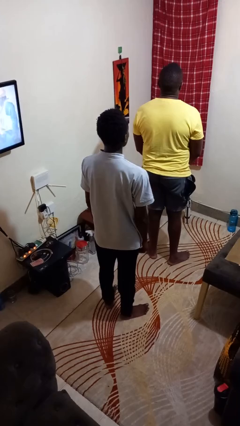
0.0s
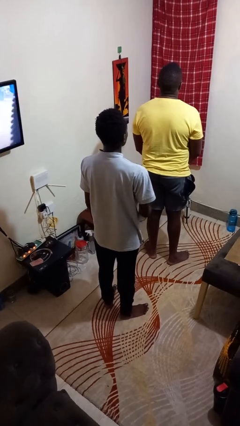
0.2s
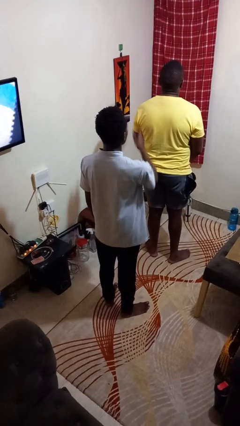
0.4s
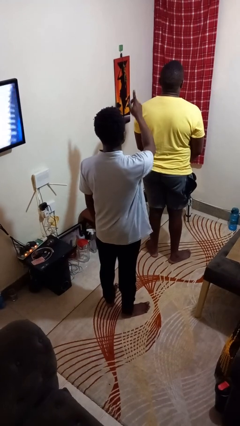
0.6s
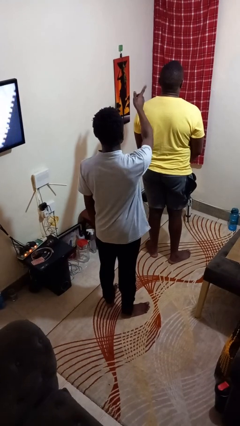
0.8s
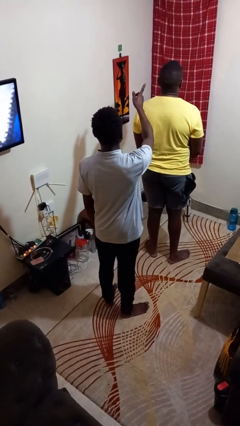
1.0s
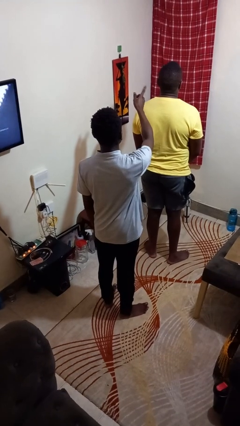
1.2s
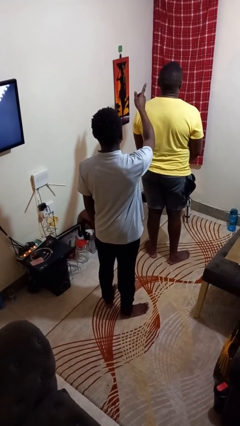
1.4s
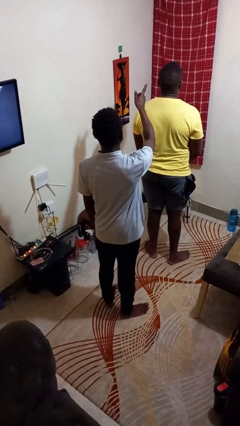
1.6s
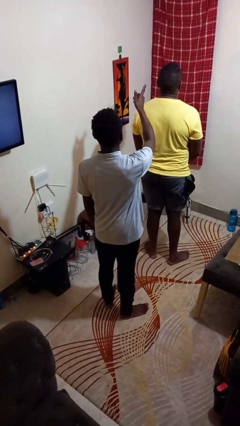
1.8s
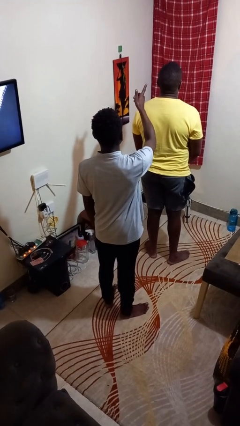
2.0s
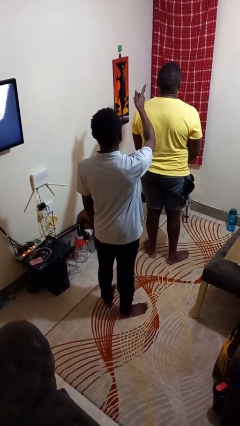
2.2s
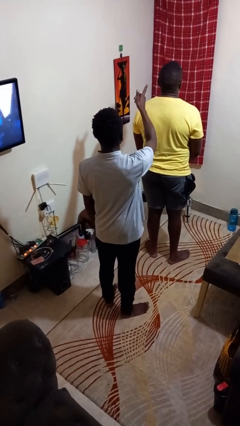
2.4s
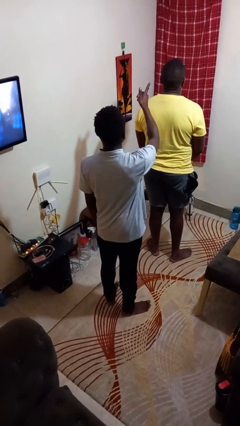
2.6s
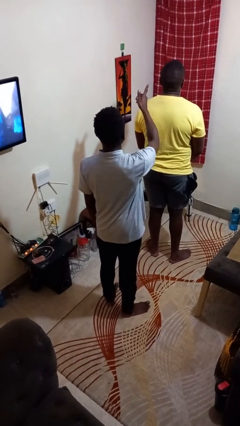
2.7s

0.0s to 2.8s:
person points at person

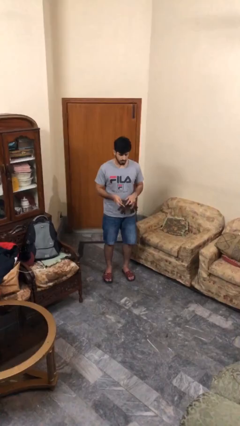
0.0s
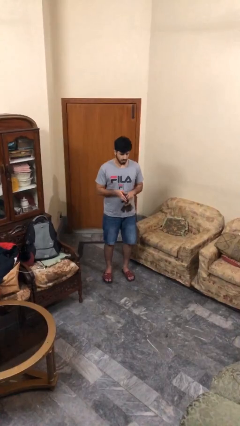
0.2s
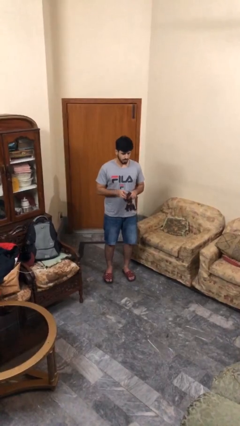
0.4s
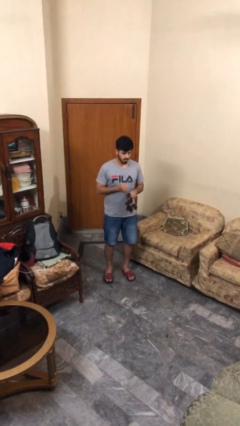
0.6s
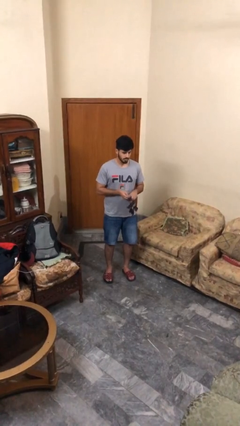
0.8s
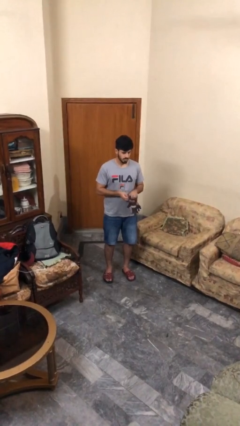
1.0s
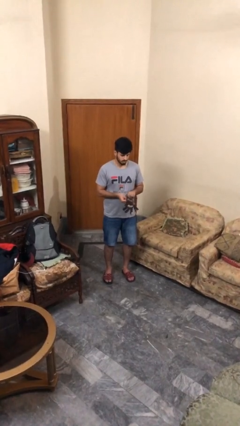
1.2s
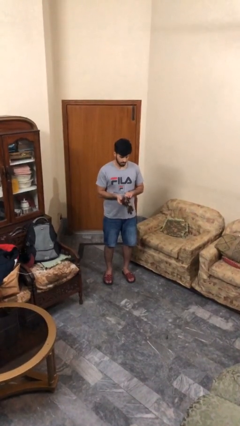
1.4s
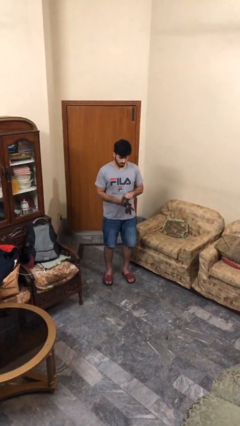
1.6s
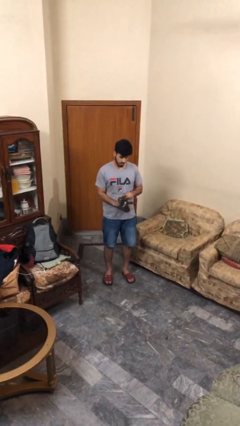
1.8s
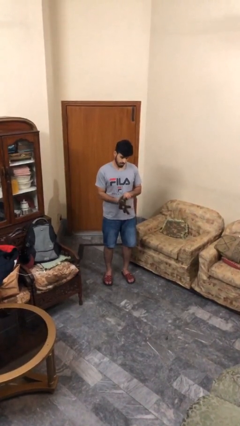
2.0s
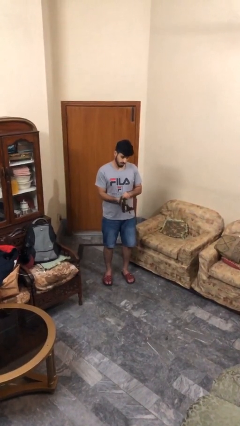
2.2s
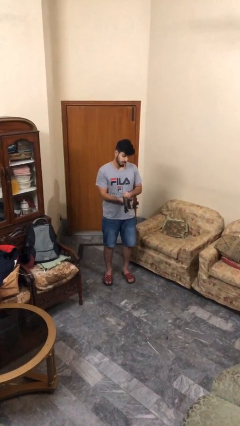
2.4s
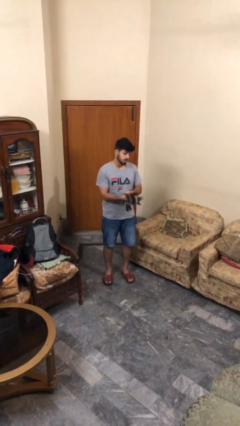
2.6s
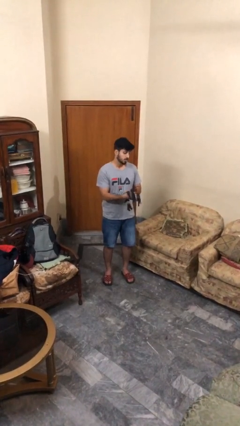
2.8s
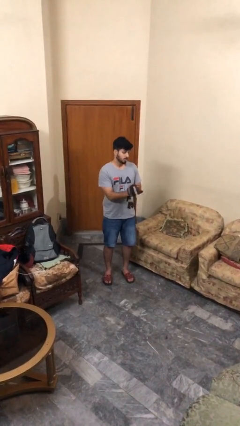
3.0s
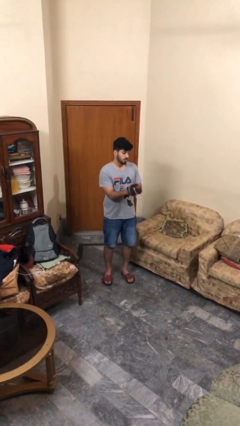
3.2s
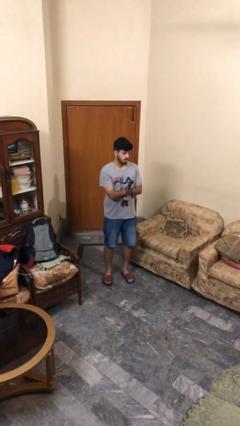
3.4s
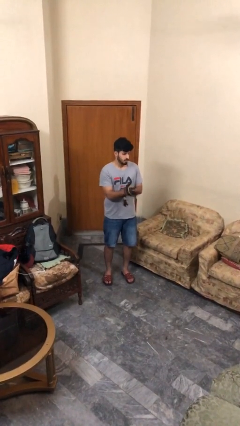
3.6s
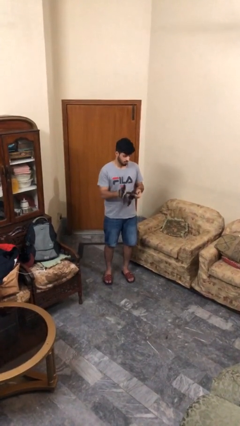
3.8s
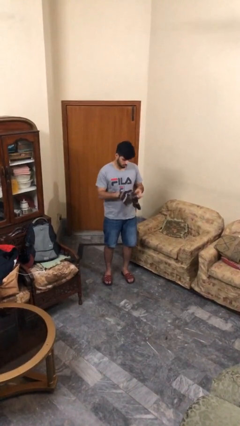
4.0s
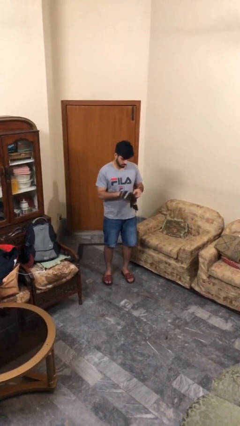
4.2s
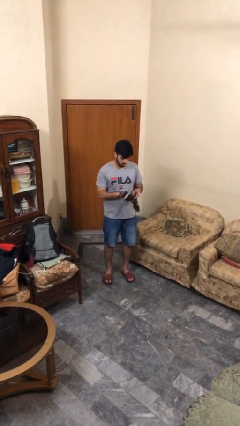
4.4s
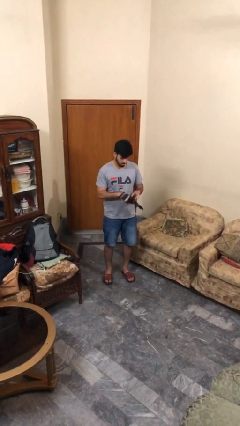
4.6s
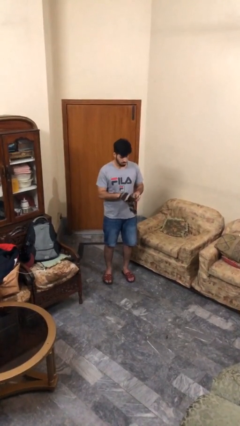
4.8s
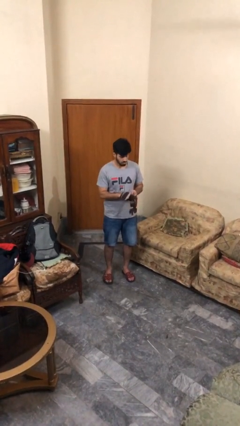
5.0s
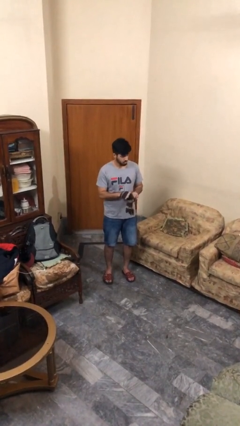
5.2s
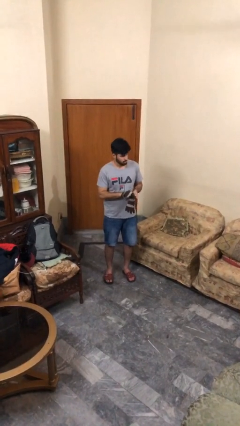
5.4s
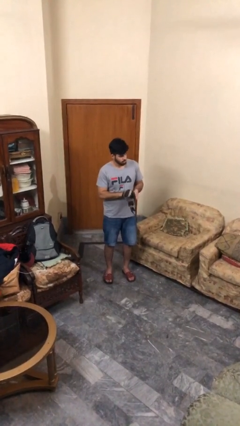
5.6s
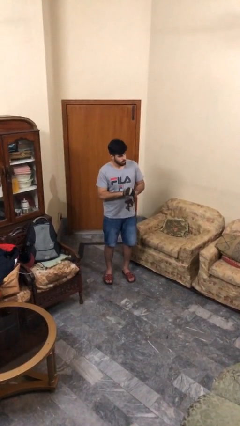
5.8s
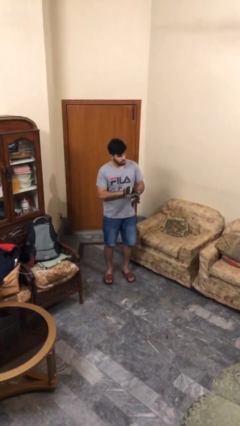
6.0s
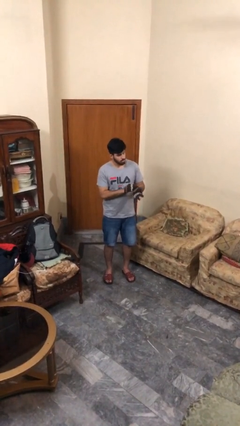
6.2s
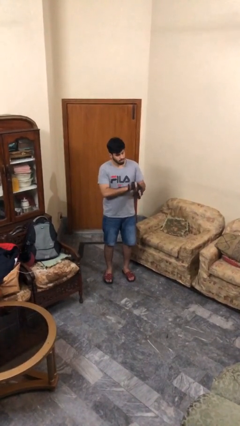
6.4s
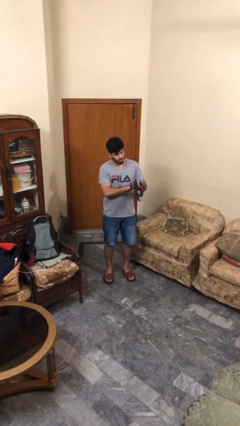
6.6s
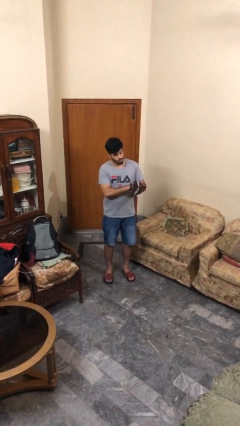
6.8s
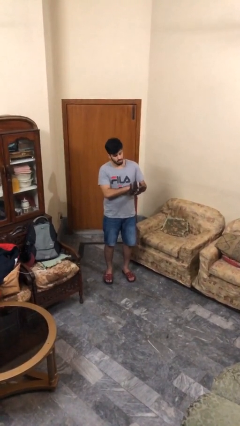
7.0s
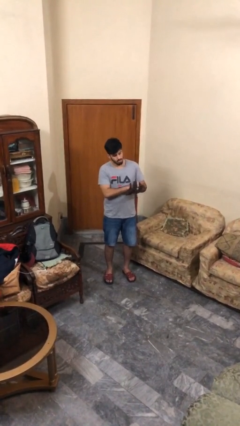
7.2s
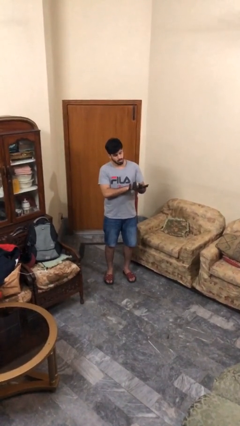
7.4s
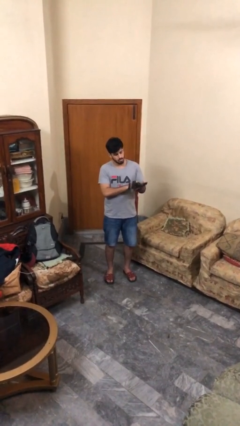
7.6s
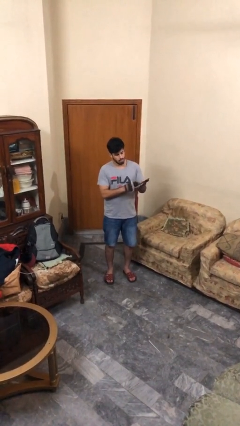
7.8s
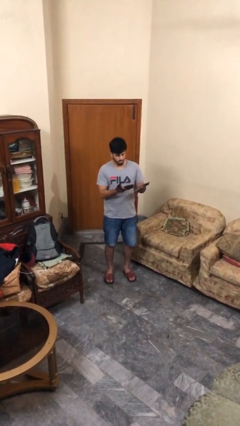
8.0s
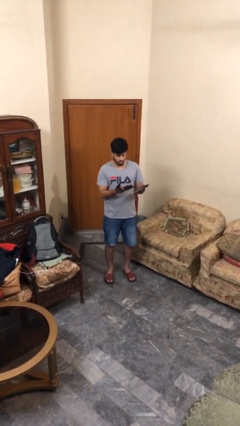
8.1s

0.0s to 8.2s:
person puts on gloves

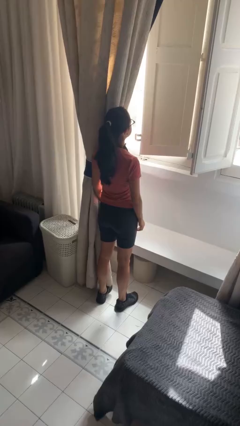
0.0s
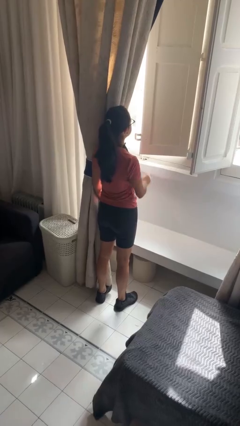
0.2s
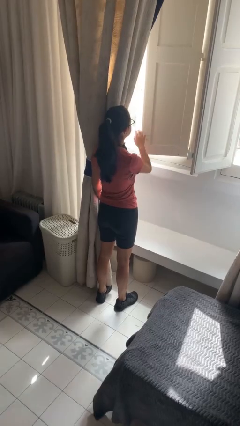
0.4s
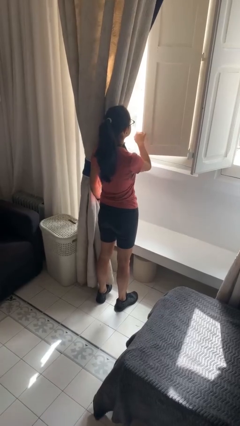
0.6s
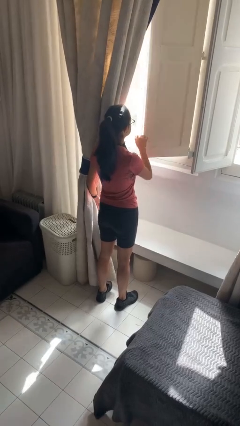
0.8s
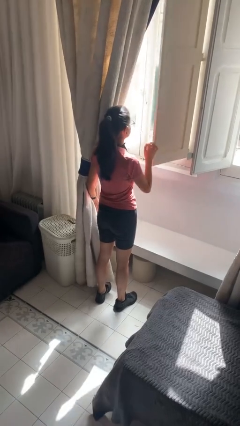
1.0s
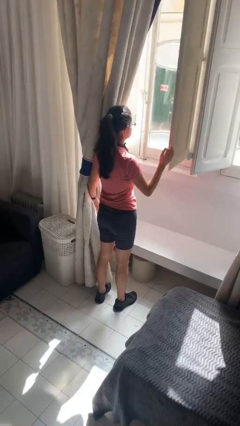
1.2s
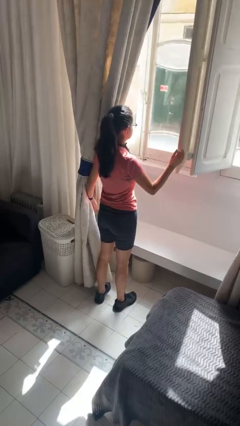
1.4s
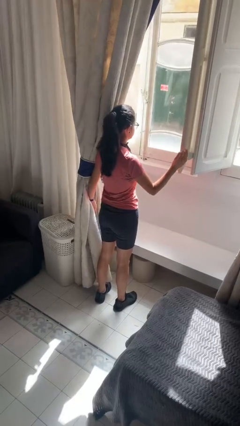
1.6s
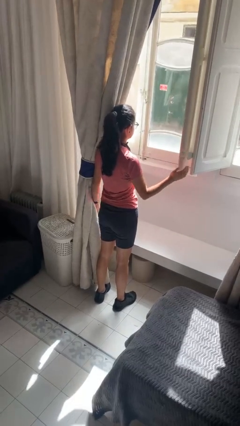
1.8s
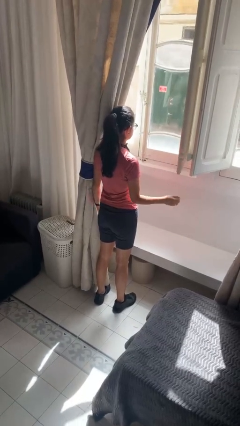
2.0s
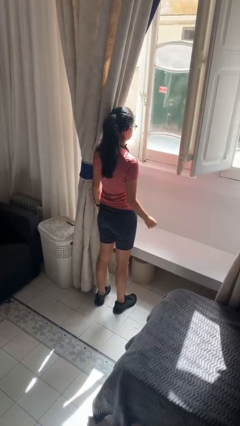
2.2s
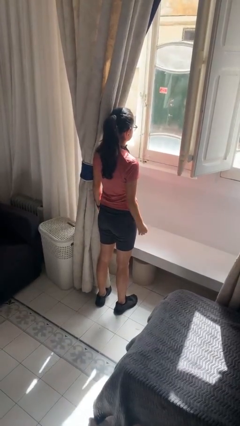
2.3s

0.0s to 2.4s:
person opens home window

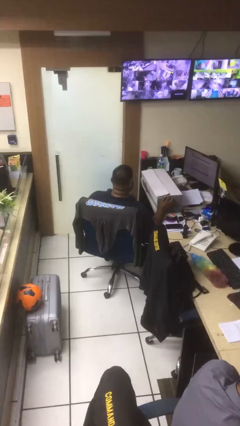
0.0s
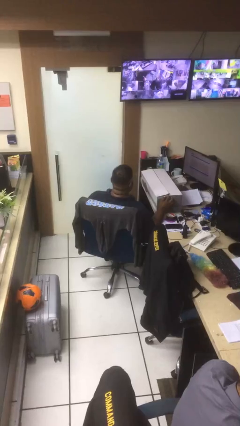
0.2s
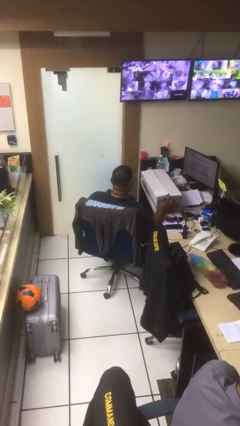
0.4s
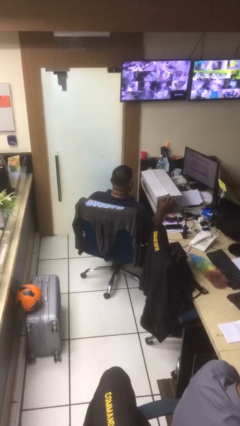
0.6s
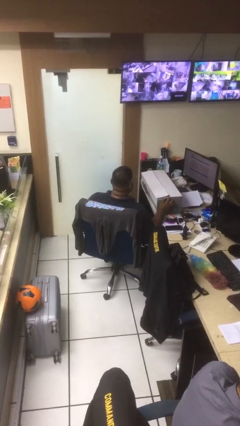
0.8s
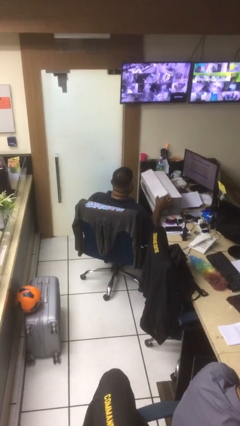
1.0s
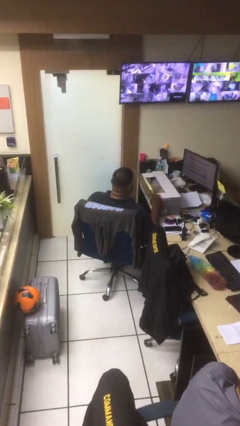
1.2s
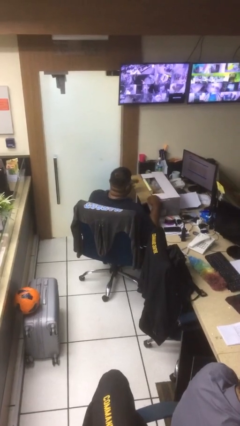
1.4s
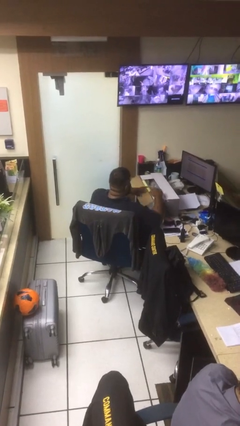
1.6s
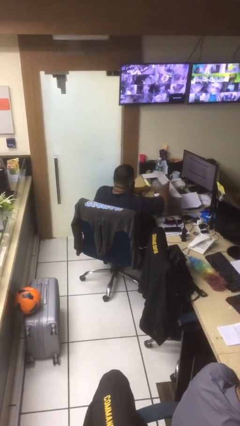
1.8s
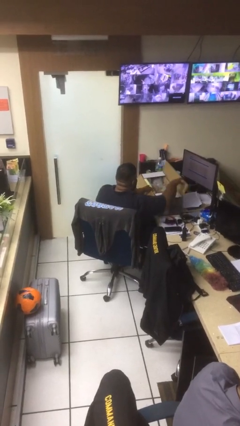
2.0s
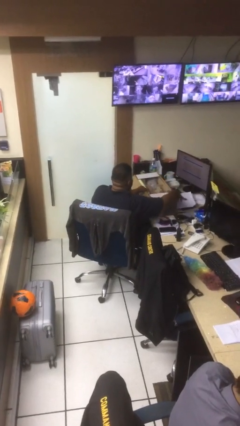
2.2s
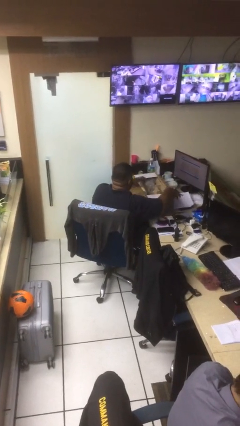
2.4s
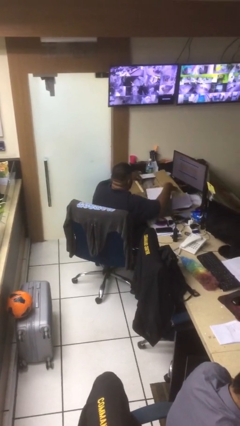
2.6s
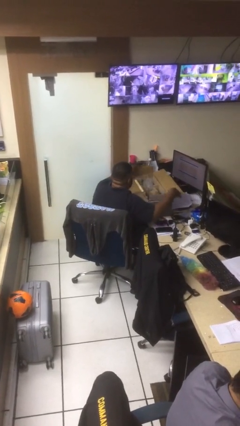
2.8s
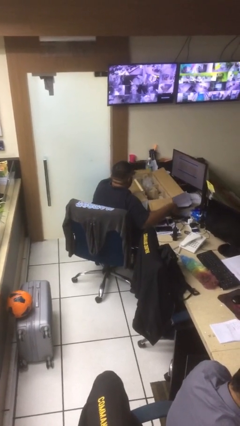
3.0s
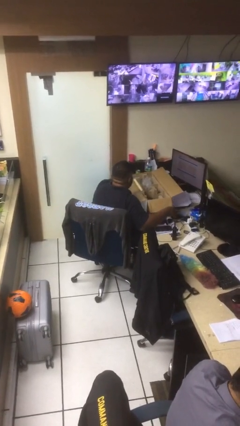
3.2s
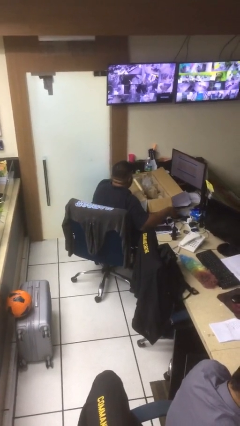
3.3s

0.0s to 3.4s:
person opens box

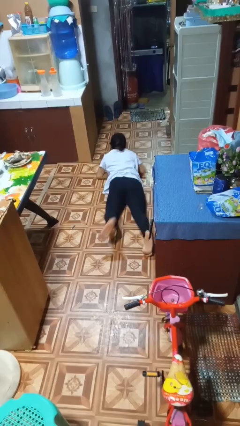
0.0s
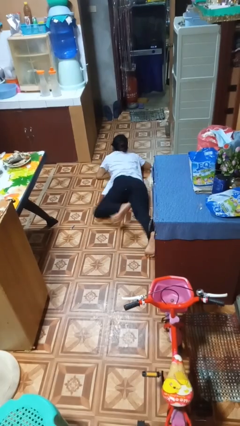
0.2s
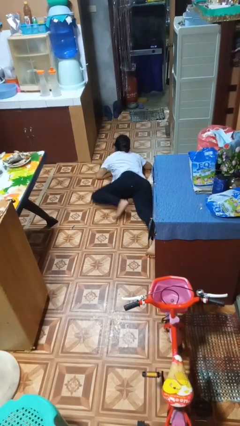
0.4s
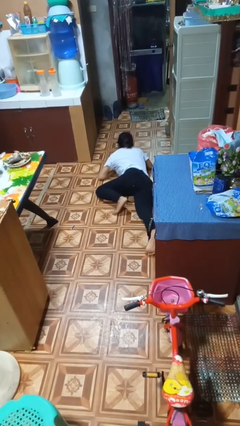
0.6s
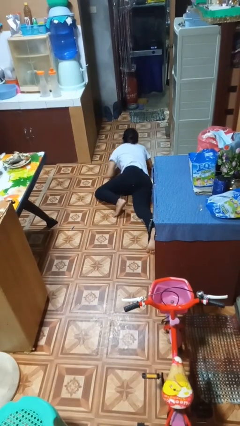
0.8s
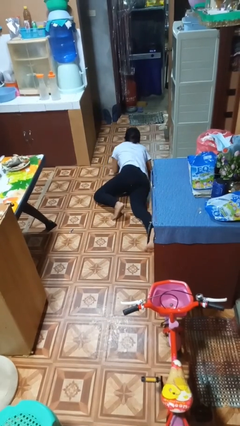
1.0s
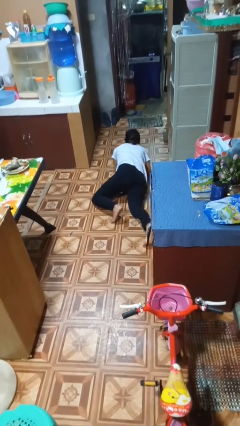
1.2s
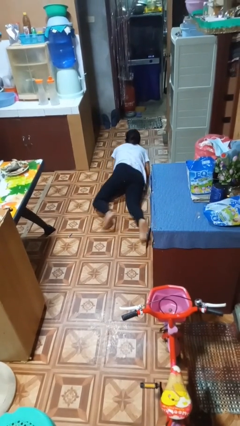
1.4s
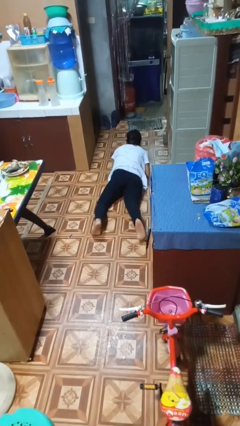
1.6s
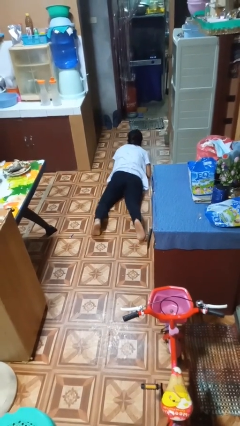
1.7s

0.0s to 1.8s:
person crawls
